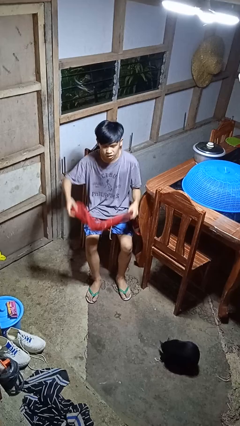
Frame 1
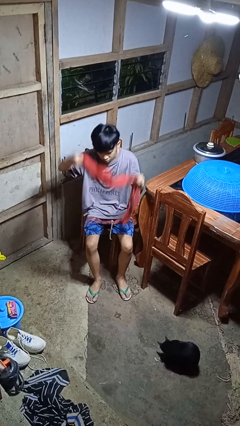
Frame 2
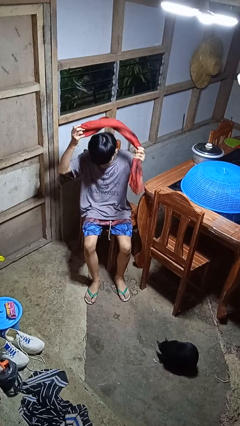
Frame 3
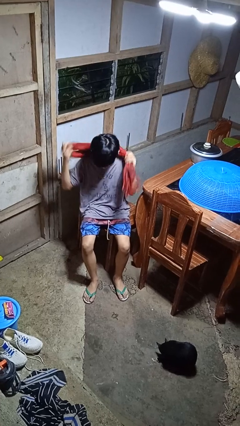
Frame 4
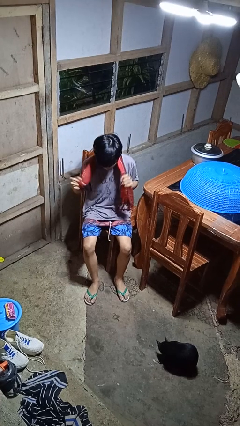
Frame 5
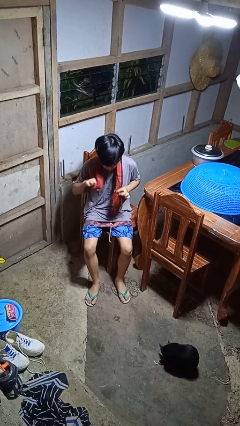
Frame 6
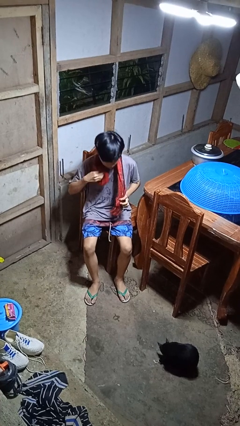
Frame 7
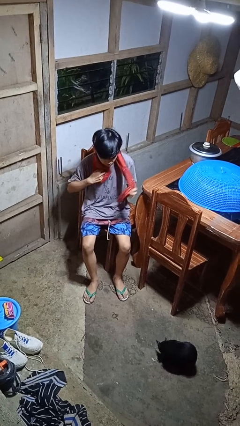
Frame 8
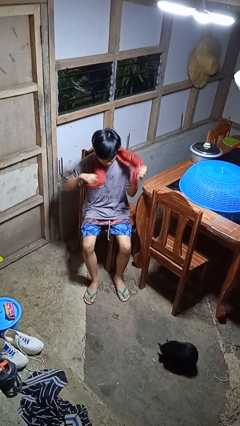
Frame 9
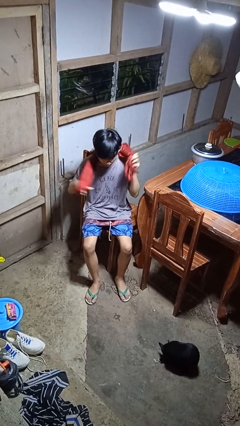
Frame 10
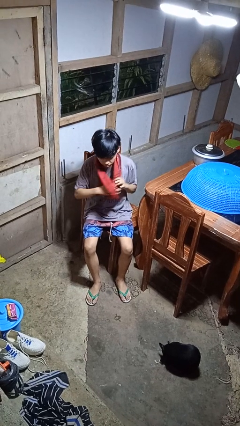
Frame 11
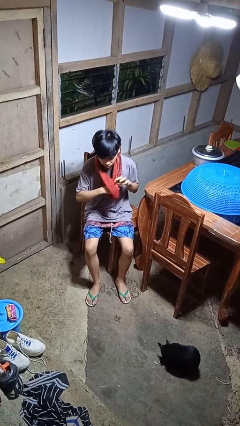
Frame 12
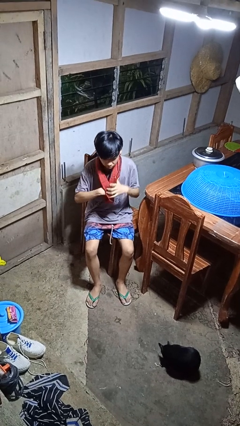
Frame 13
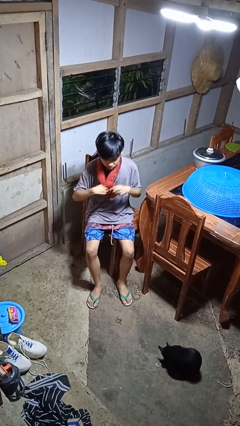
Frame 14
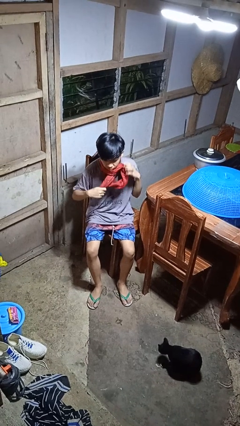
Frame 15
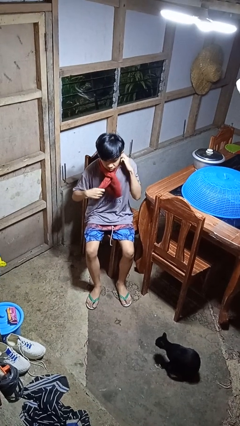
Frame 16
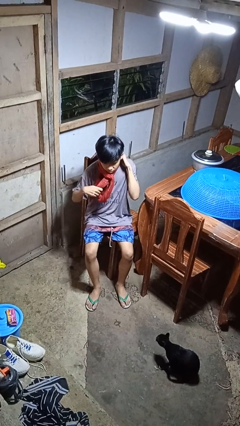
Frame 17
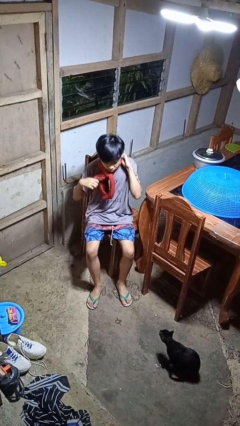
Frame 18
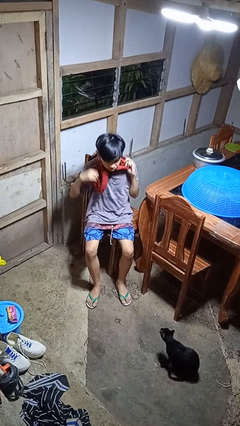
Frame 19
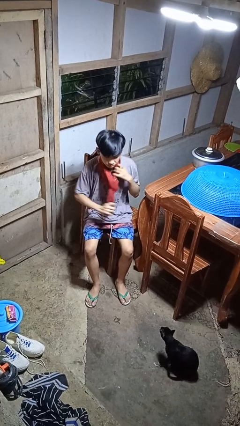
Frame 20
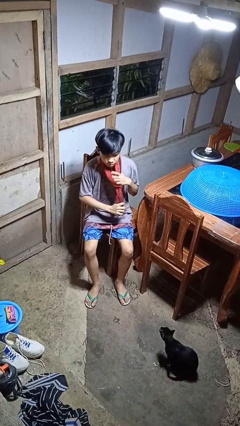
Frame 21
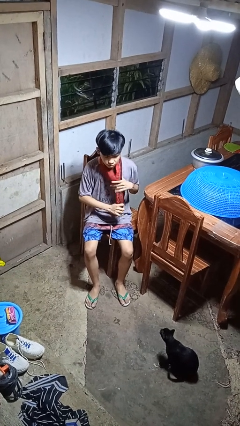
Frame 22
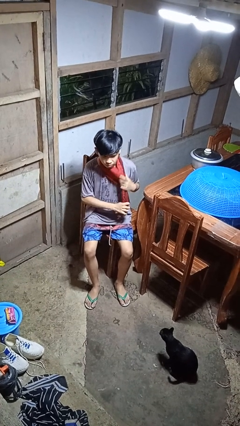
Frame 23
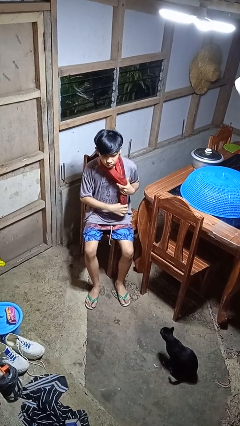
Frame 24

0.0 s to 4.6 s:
person puts on scarf

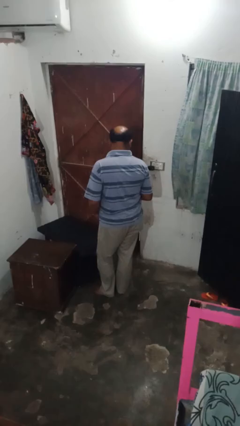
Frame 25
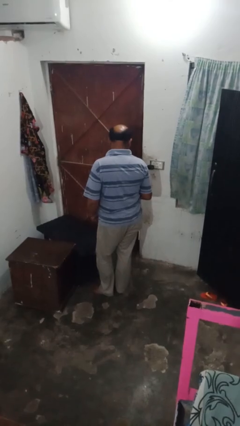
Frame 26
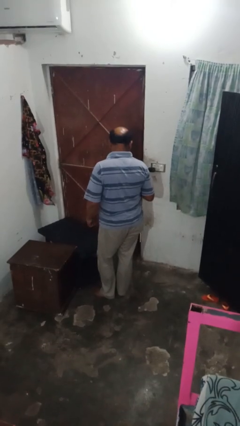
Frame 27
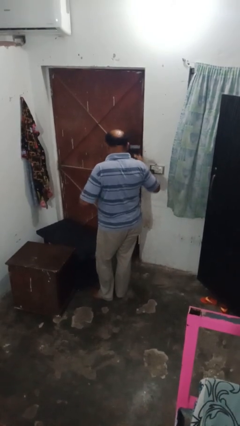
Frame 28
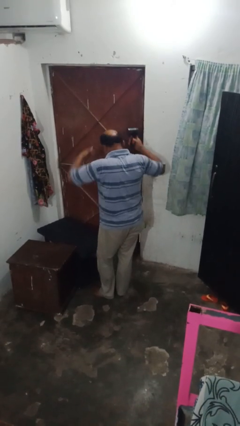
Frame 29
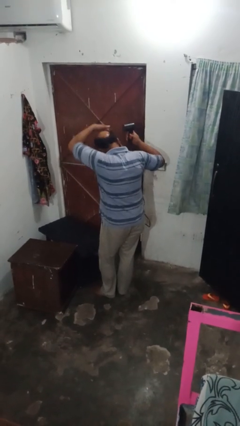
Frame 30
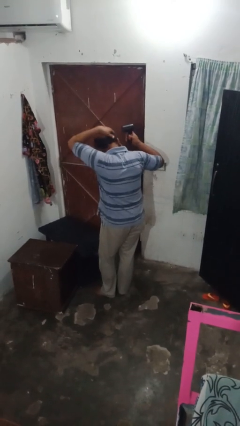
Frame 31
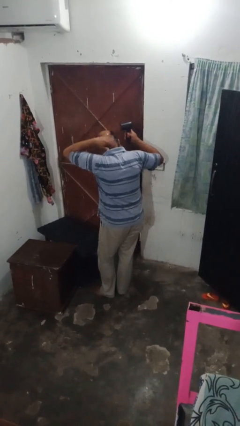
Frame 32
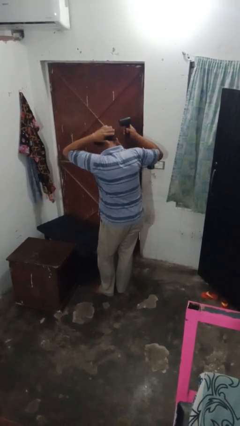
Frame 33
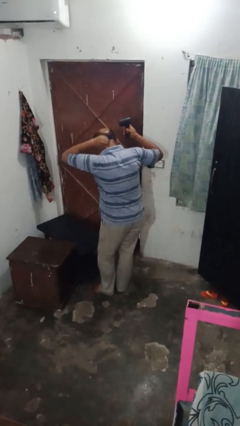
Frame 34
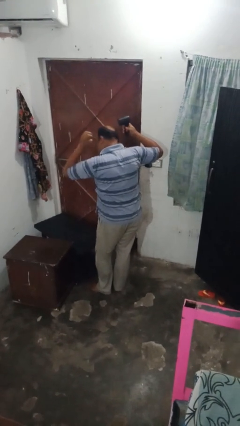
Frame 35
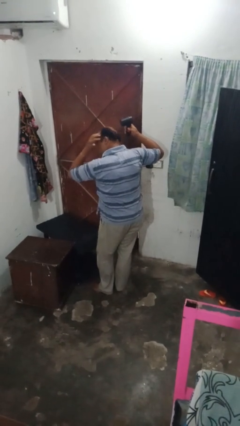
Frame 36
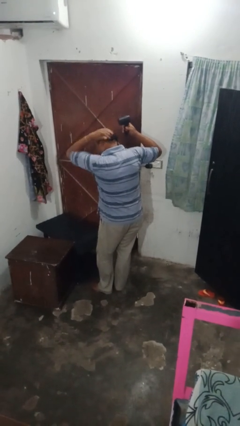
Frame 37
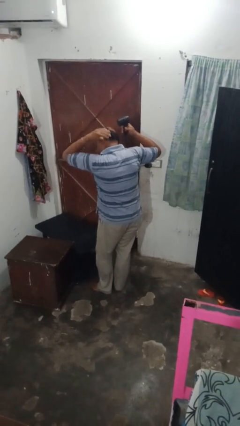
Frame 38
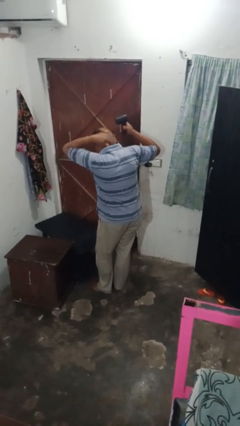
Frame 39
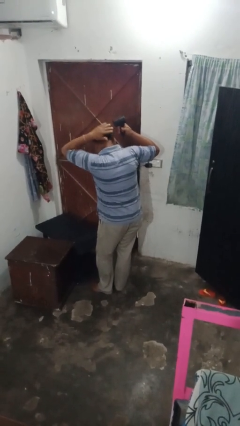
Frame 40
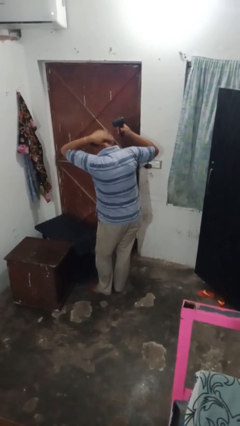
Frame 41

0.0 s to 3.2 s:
person dries hair with towel

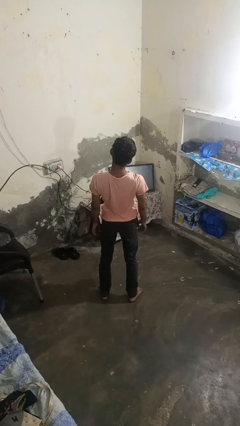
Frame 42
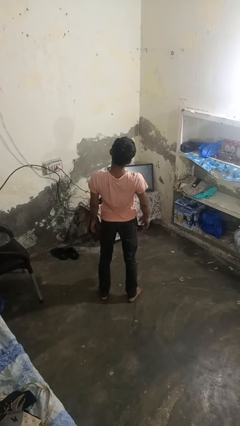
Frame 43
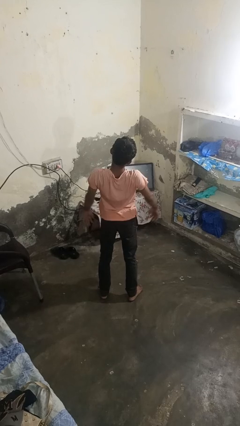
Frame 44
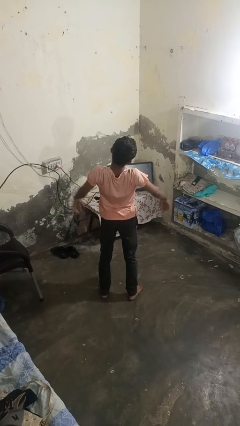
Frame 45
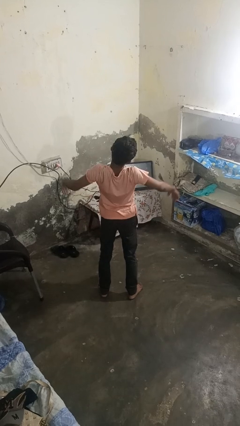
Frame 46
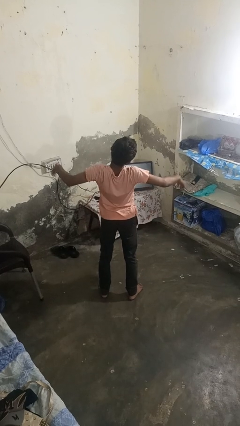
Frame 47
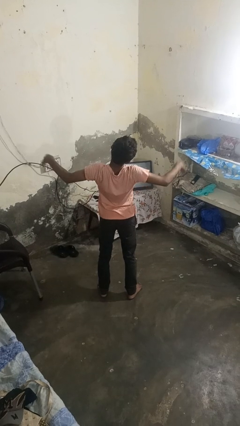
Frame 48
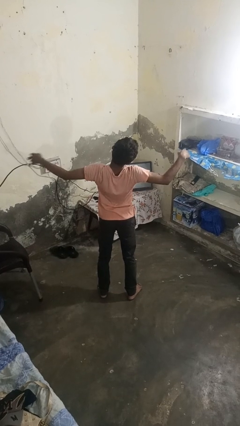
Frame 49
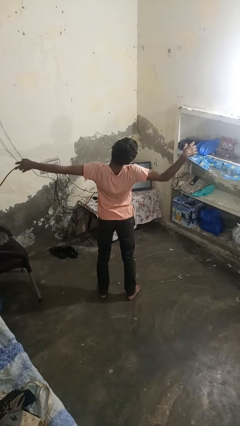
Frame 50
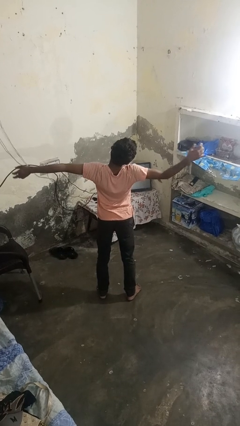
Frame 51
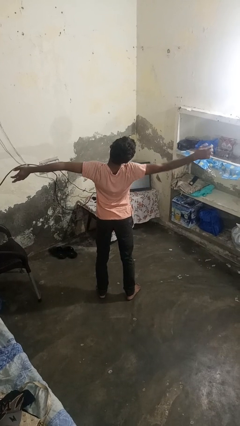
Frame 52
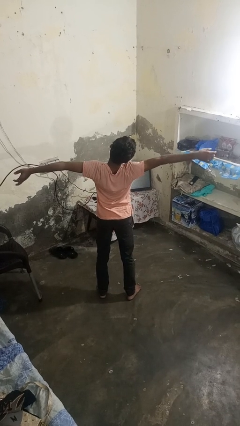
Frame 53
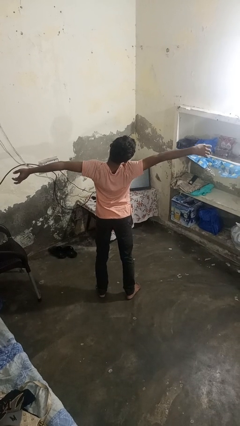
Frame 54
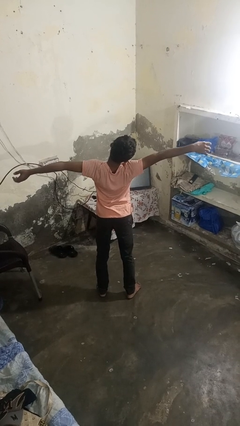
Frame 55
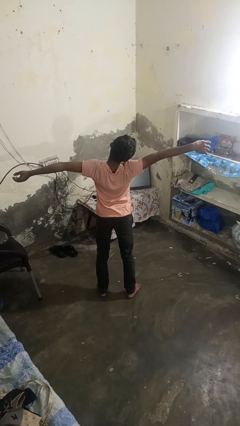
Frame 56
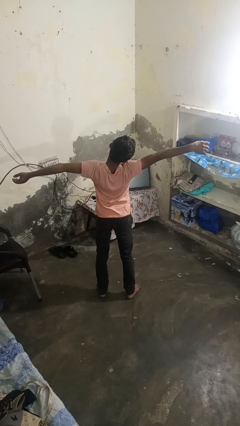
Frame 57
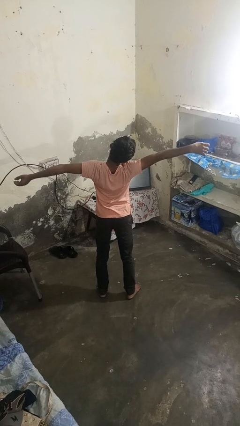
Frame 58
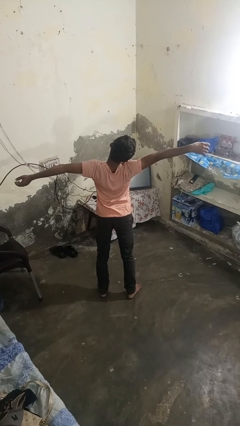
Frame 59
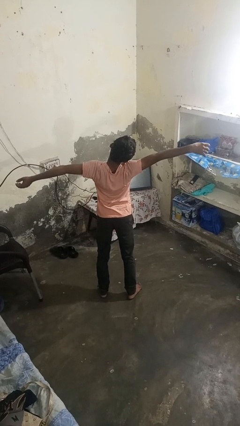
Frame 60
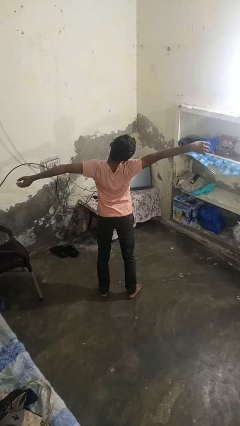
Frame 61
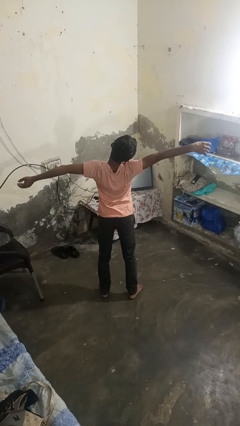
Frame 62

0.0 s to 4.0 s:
person stretches arms to side

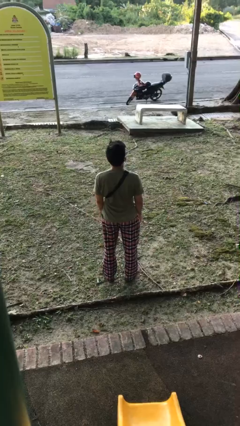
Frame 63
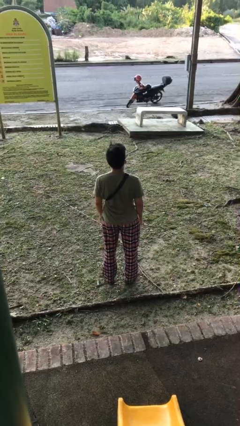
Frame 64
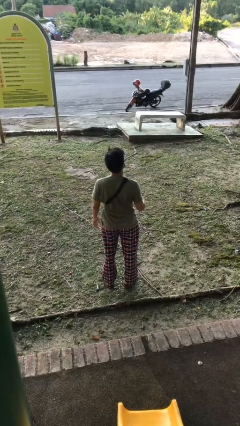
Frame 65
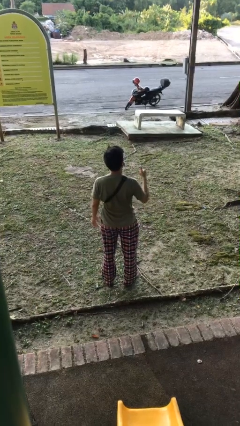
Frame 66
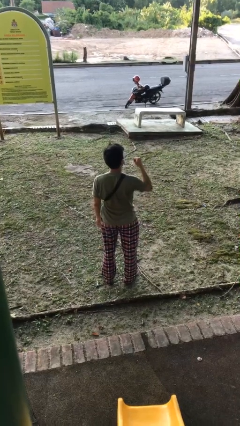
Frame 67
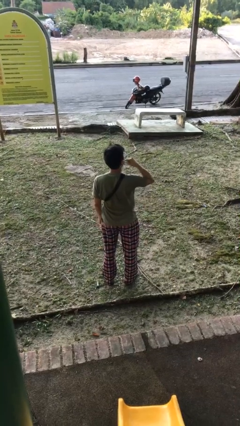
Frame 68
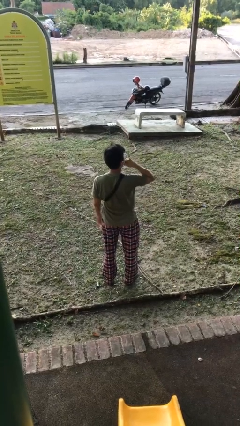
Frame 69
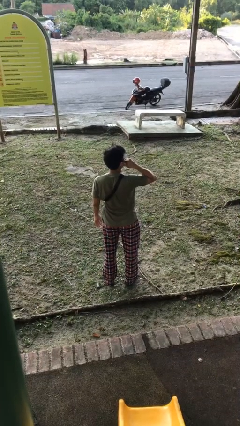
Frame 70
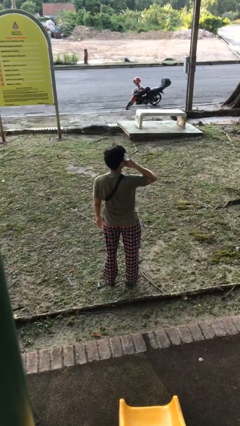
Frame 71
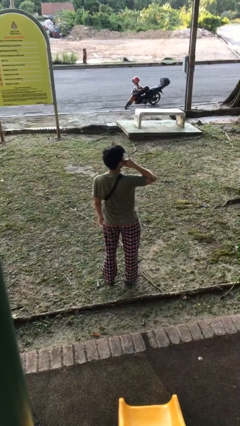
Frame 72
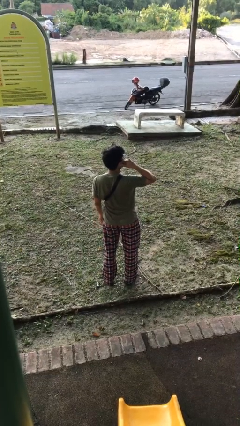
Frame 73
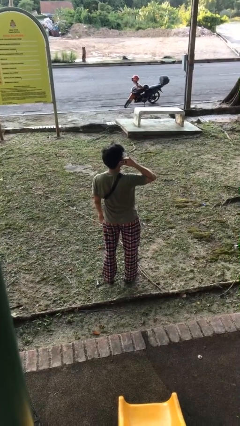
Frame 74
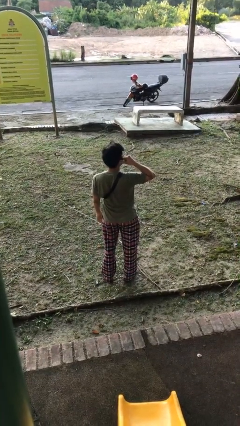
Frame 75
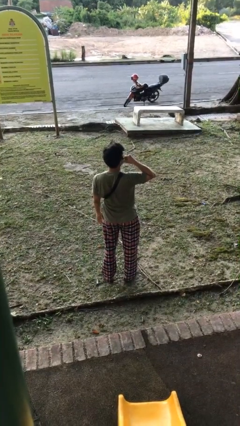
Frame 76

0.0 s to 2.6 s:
person gestures call me

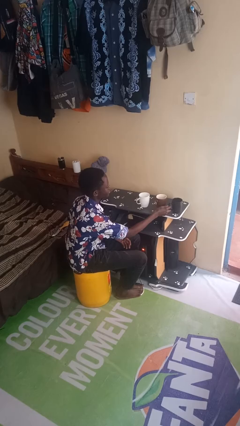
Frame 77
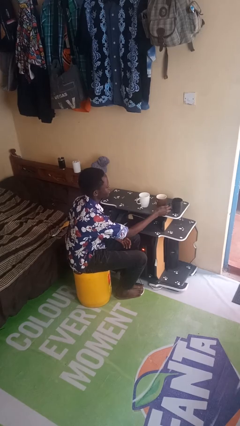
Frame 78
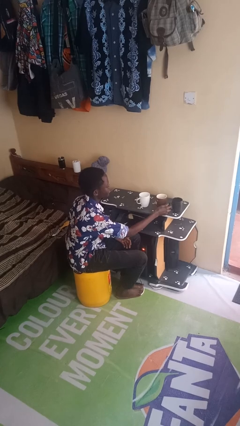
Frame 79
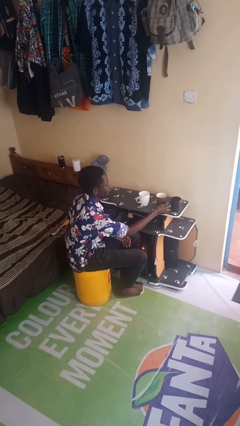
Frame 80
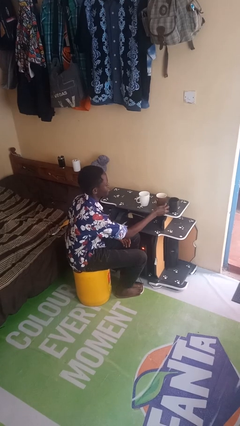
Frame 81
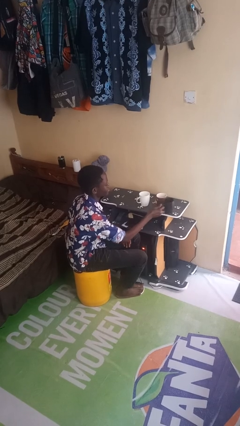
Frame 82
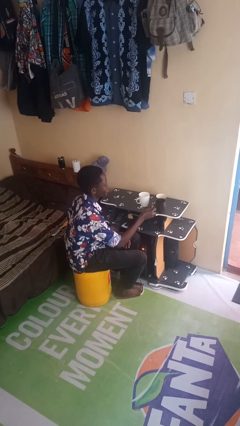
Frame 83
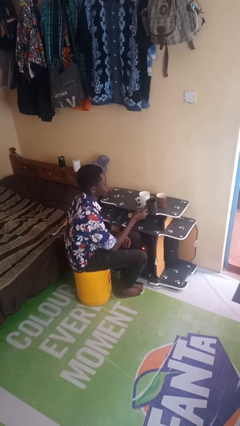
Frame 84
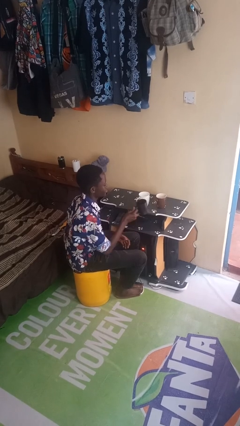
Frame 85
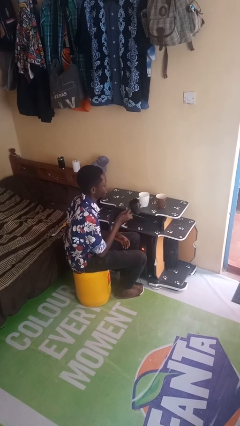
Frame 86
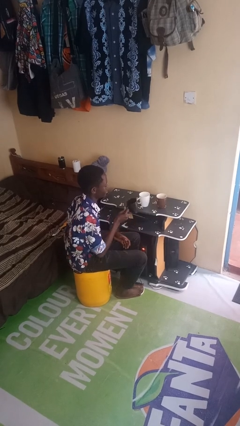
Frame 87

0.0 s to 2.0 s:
person picks up object from table

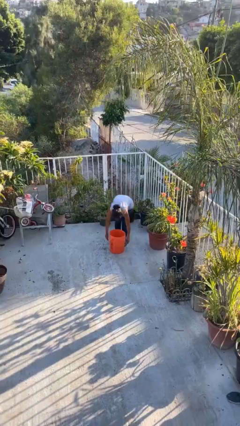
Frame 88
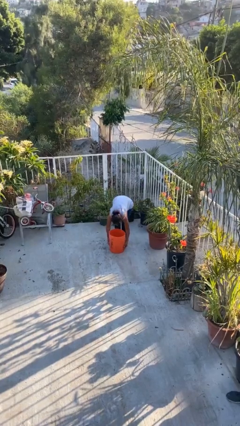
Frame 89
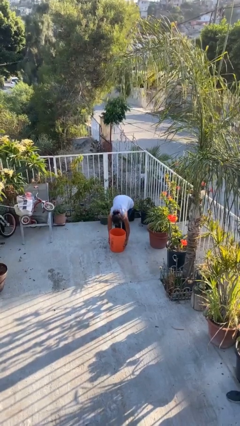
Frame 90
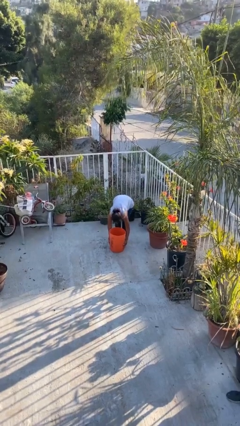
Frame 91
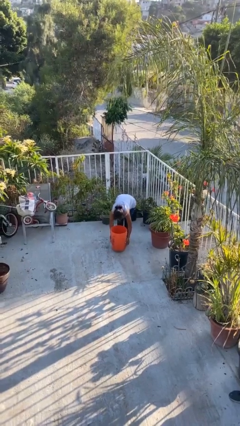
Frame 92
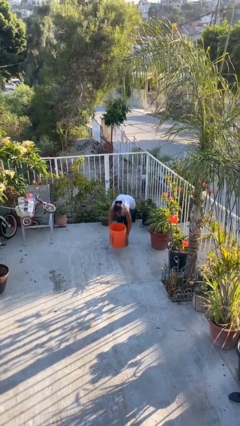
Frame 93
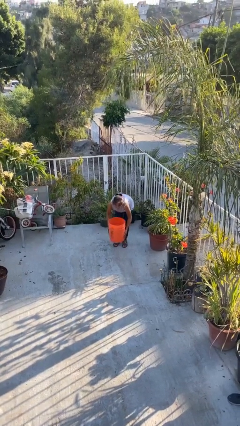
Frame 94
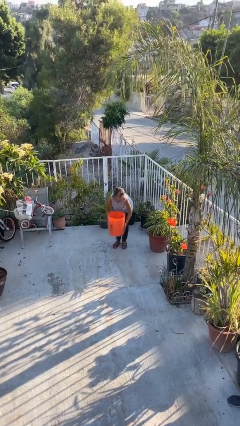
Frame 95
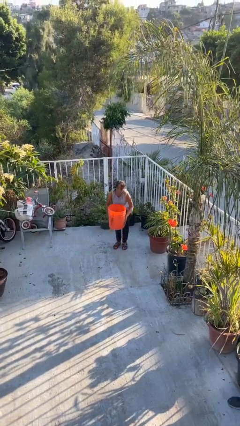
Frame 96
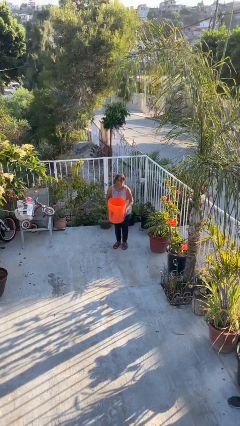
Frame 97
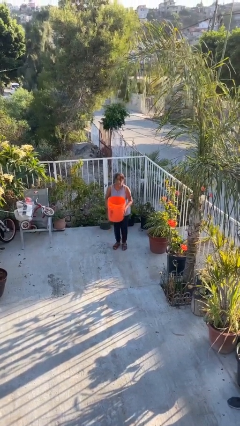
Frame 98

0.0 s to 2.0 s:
person picks up object from floor
